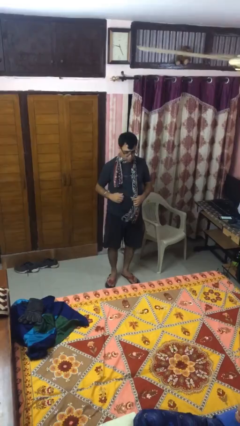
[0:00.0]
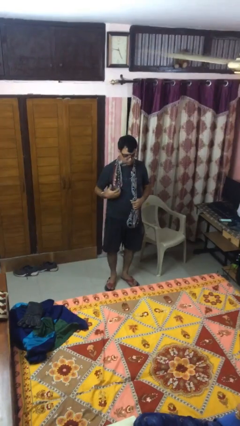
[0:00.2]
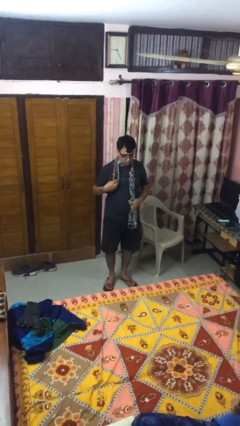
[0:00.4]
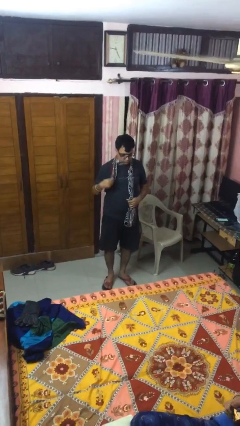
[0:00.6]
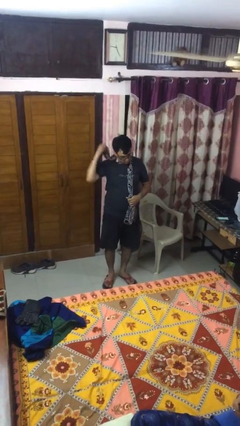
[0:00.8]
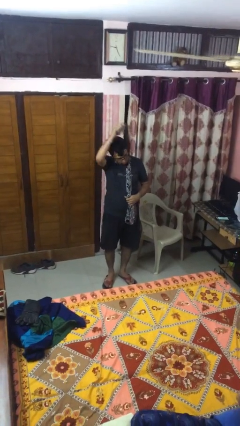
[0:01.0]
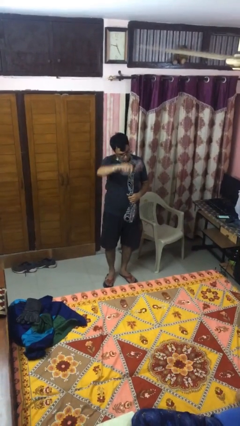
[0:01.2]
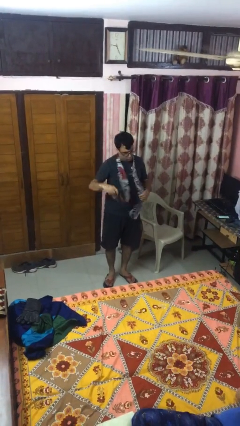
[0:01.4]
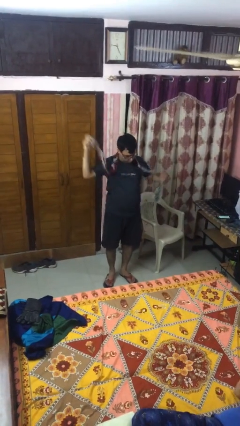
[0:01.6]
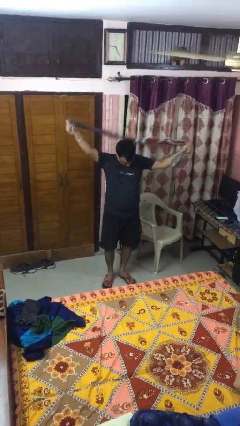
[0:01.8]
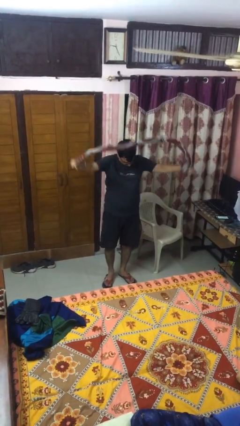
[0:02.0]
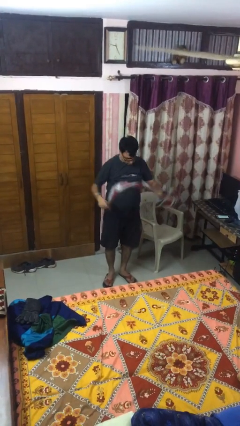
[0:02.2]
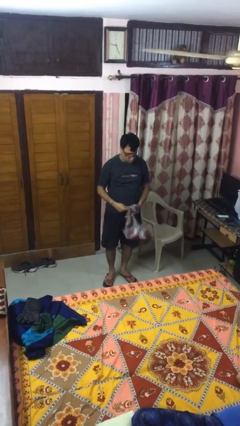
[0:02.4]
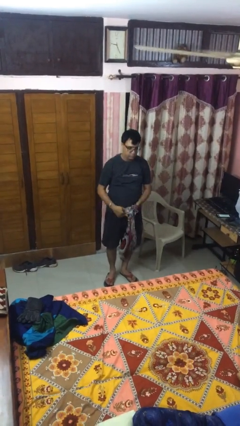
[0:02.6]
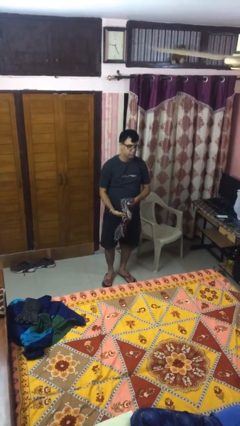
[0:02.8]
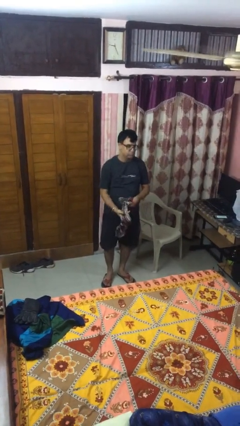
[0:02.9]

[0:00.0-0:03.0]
person takes off scarf

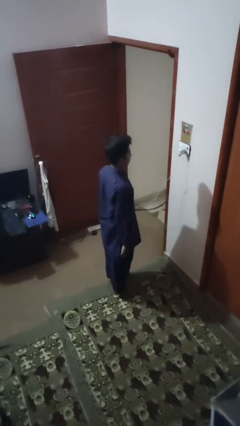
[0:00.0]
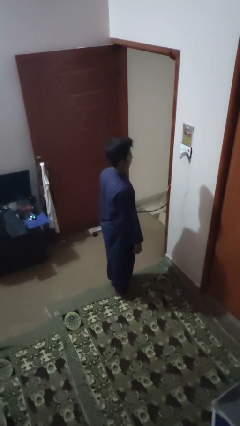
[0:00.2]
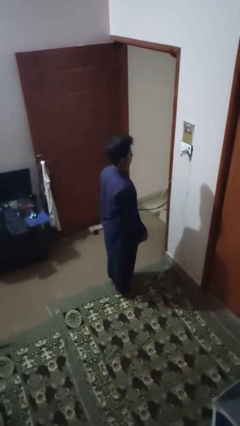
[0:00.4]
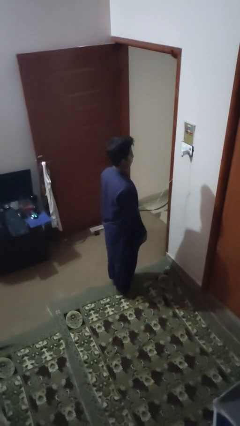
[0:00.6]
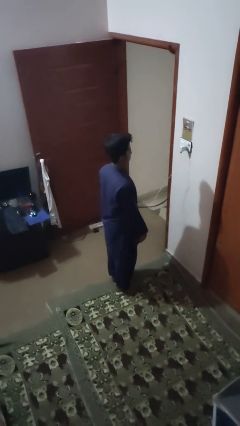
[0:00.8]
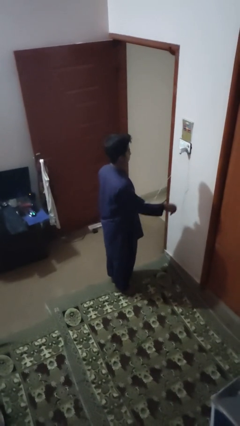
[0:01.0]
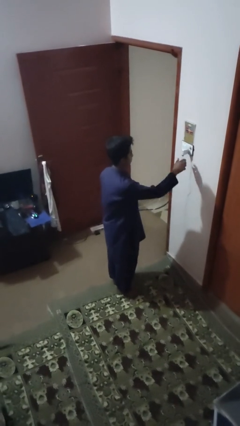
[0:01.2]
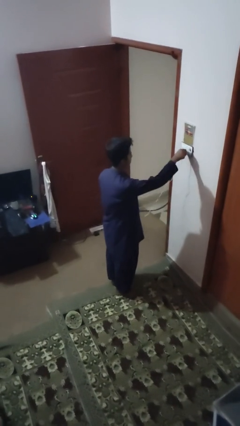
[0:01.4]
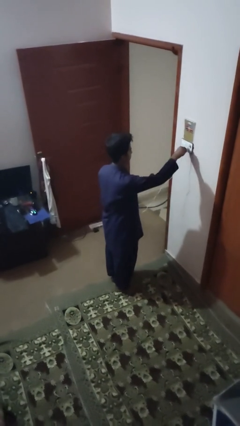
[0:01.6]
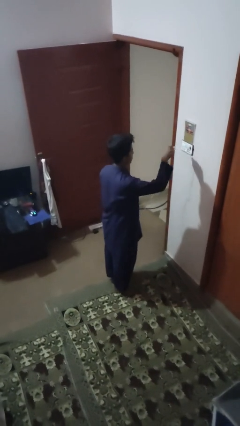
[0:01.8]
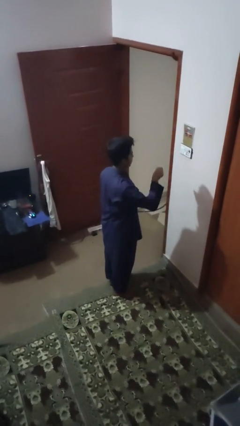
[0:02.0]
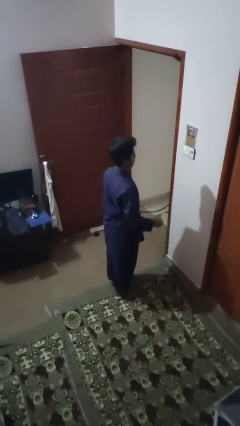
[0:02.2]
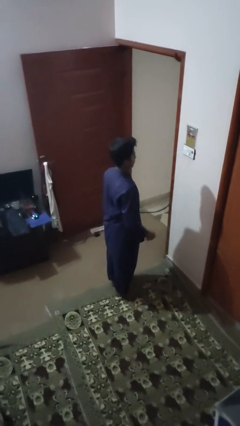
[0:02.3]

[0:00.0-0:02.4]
person unplugs from electrical socket

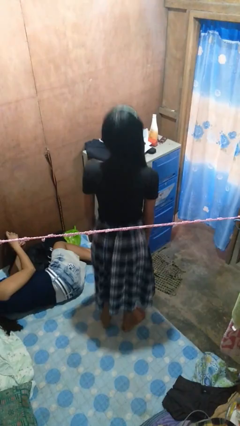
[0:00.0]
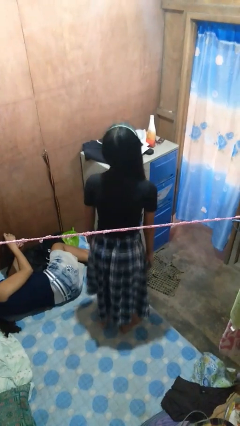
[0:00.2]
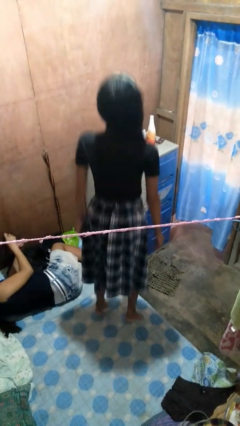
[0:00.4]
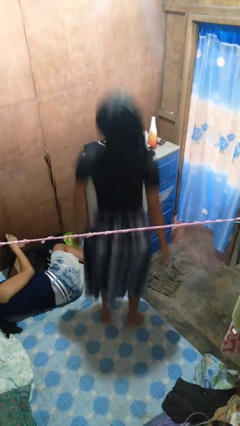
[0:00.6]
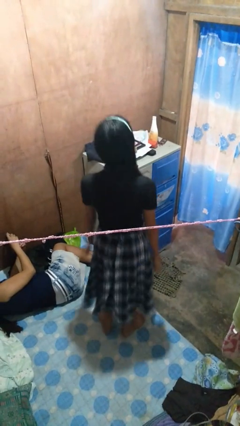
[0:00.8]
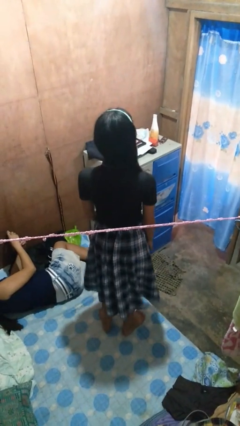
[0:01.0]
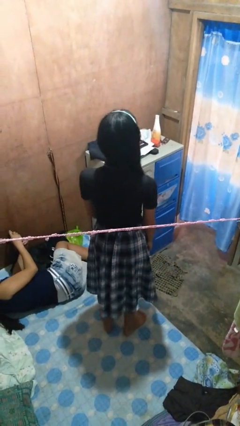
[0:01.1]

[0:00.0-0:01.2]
person jumps on bed

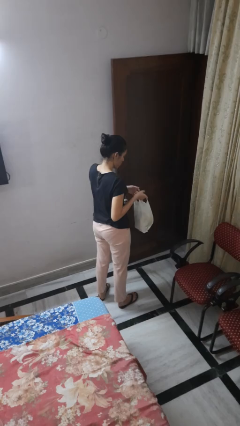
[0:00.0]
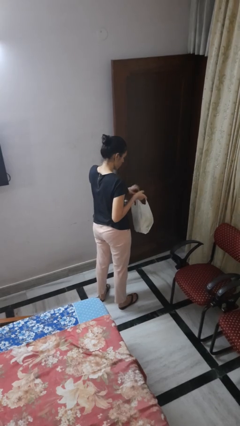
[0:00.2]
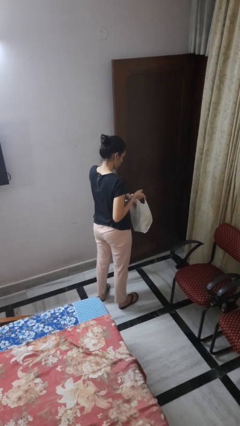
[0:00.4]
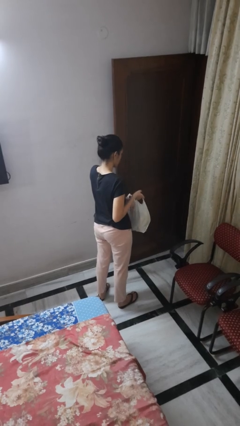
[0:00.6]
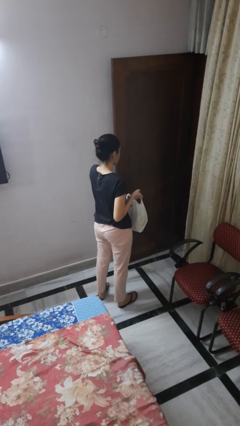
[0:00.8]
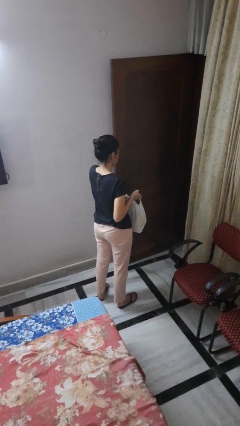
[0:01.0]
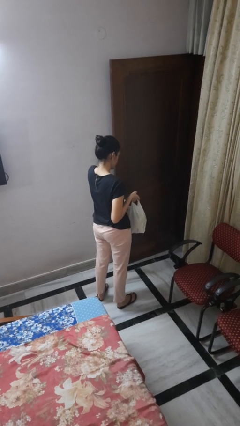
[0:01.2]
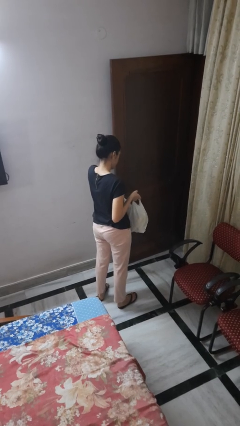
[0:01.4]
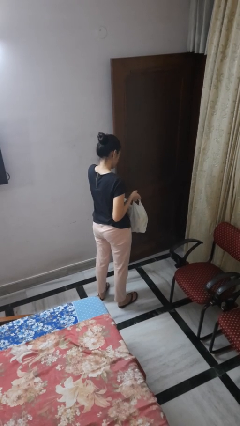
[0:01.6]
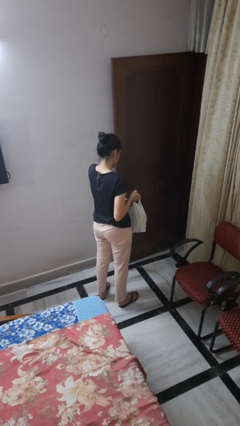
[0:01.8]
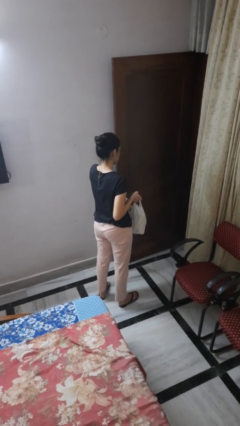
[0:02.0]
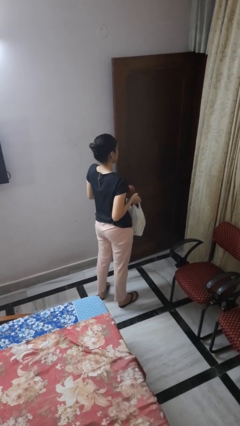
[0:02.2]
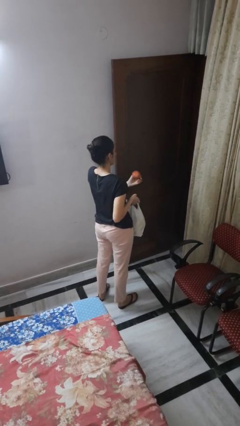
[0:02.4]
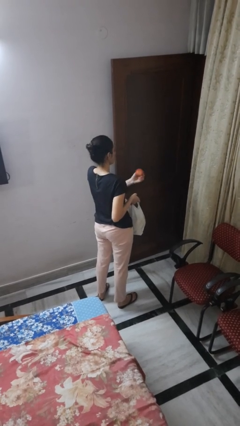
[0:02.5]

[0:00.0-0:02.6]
person takes object from bag

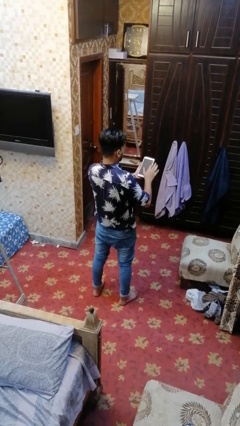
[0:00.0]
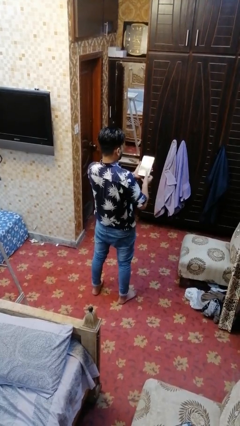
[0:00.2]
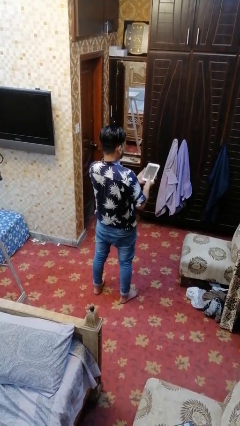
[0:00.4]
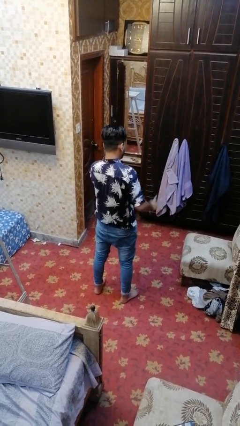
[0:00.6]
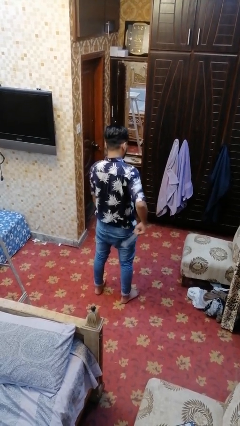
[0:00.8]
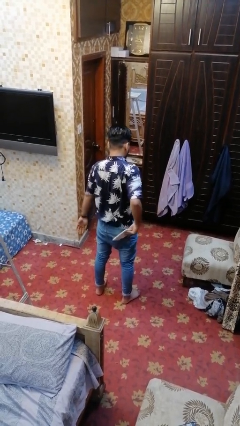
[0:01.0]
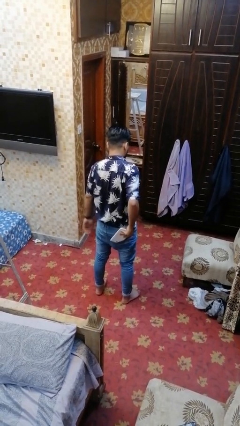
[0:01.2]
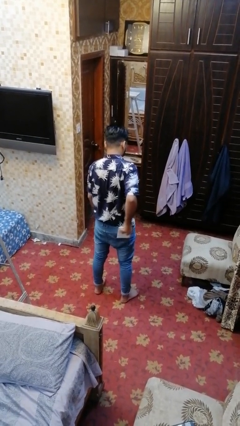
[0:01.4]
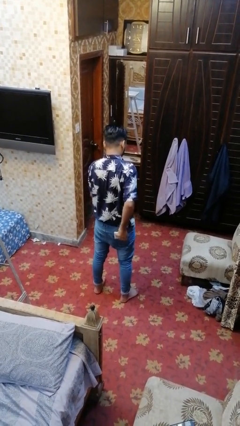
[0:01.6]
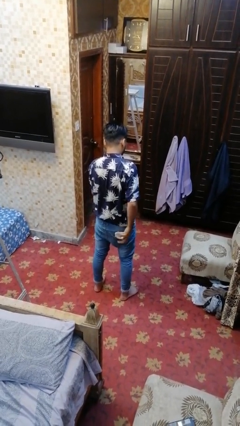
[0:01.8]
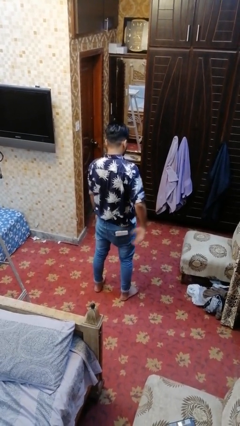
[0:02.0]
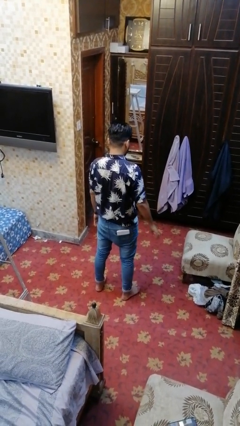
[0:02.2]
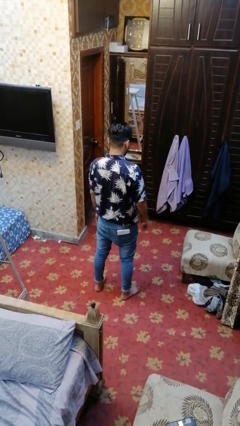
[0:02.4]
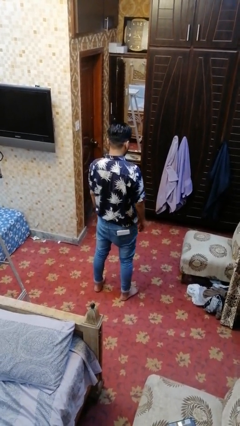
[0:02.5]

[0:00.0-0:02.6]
person puts phone into pocket

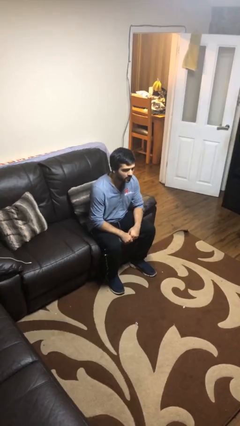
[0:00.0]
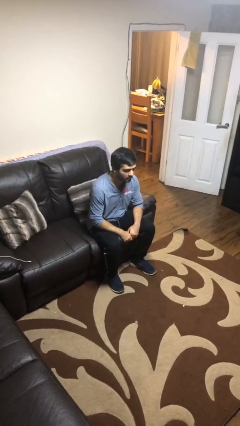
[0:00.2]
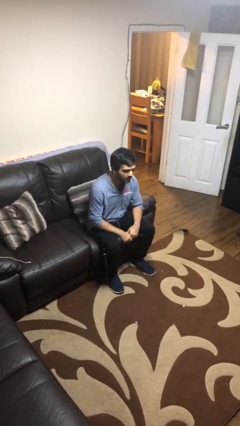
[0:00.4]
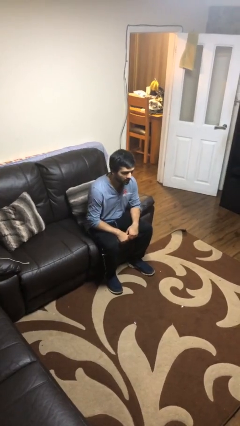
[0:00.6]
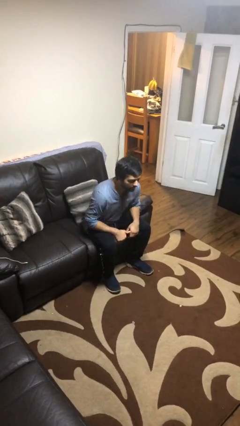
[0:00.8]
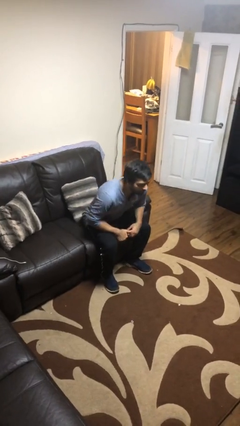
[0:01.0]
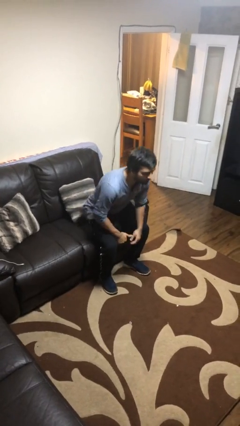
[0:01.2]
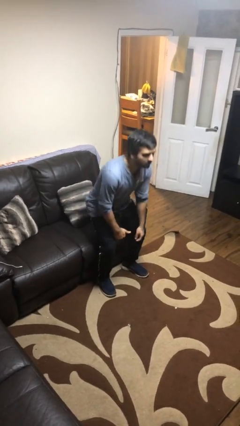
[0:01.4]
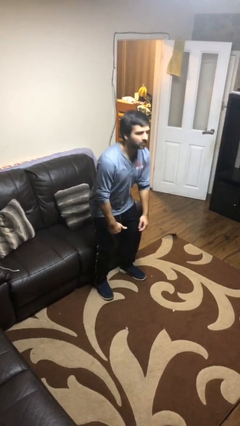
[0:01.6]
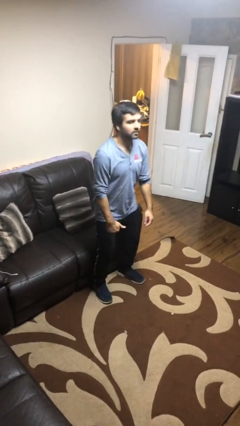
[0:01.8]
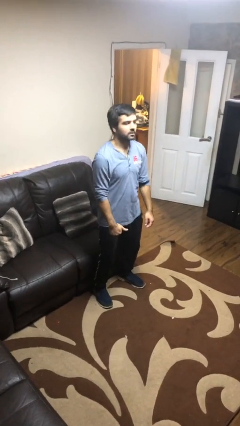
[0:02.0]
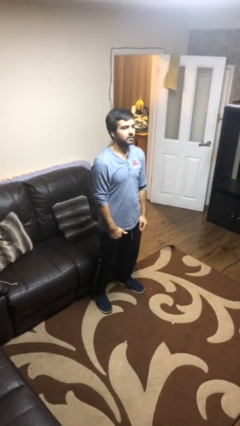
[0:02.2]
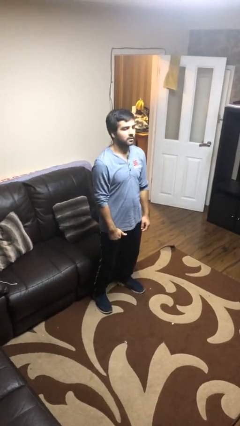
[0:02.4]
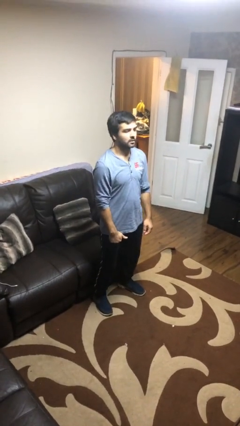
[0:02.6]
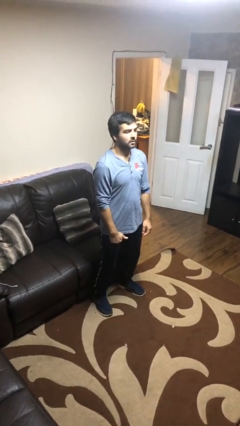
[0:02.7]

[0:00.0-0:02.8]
person stands up

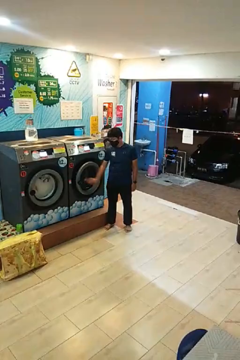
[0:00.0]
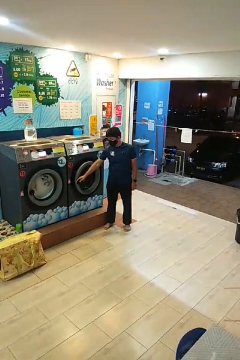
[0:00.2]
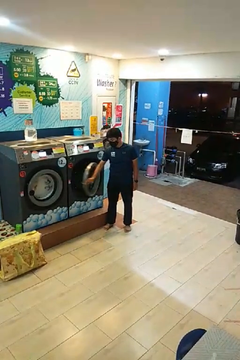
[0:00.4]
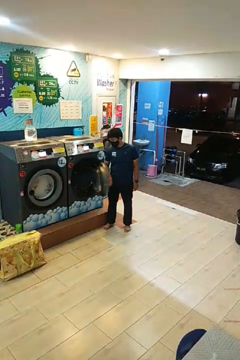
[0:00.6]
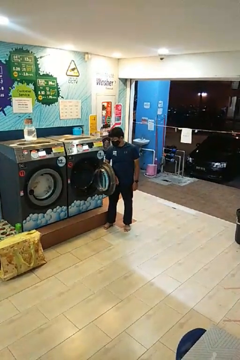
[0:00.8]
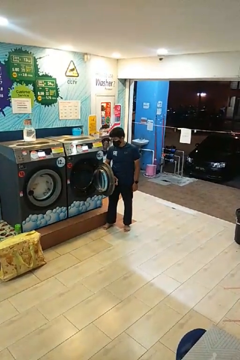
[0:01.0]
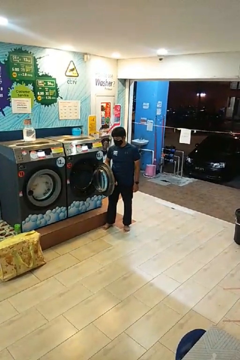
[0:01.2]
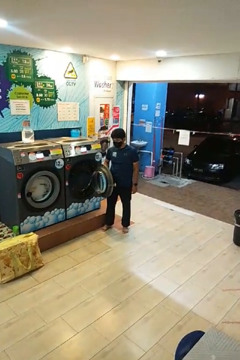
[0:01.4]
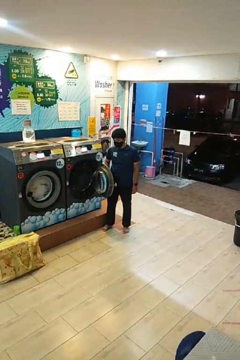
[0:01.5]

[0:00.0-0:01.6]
person opens clothes washer

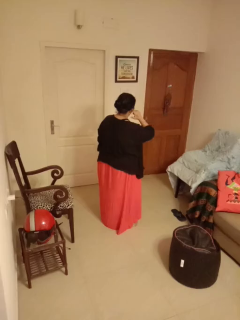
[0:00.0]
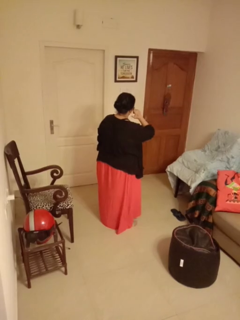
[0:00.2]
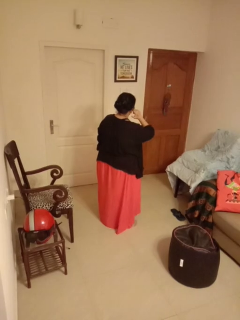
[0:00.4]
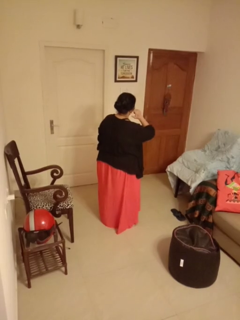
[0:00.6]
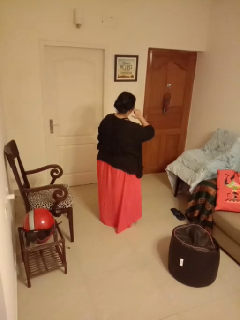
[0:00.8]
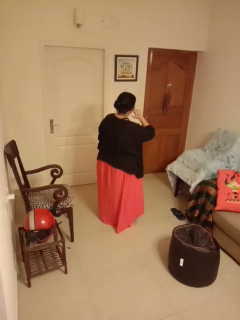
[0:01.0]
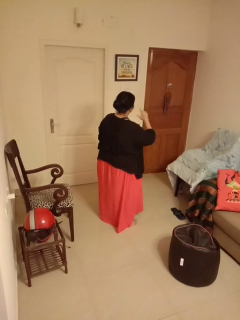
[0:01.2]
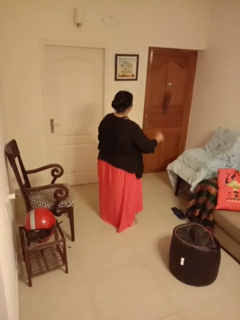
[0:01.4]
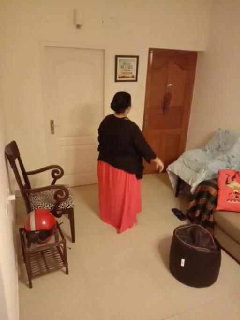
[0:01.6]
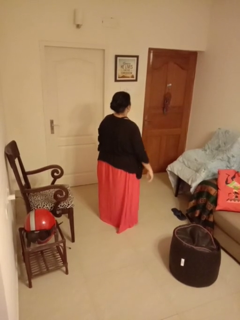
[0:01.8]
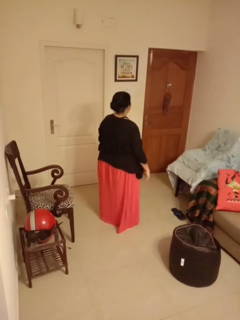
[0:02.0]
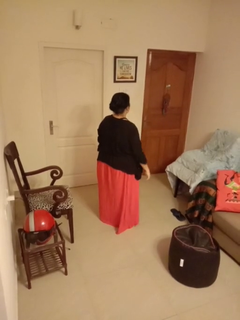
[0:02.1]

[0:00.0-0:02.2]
person gestures listen closely
